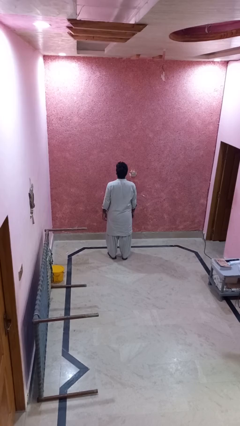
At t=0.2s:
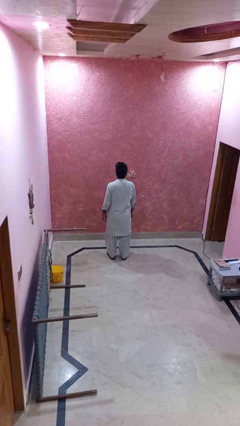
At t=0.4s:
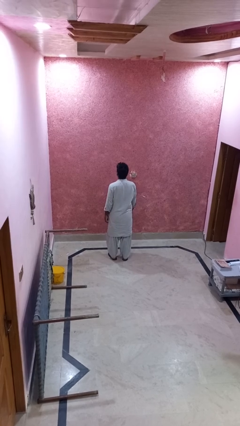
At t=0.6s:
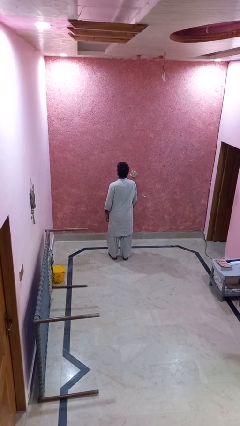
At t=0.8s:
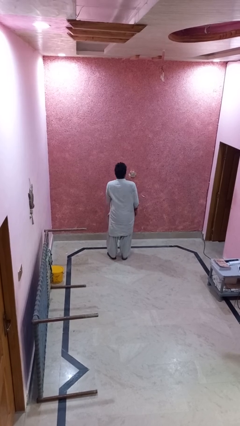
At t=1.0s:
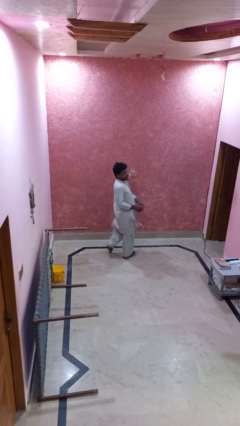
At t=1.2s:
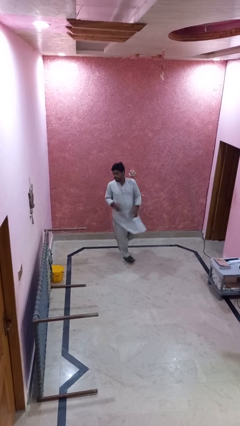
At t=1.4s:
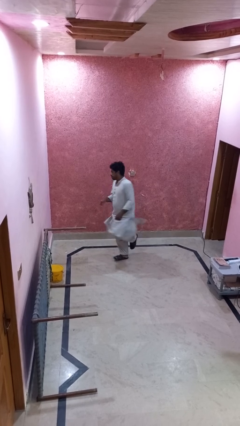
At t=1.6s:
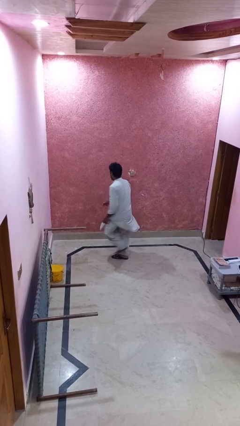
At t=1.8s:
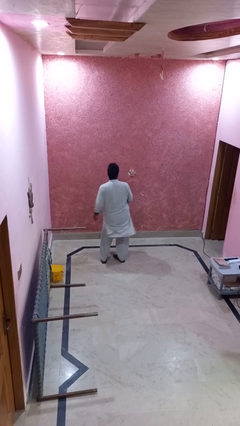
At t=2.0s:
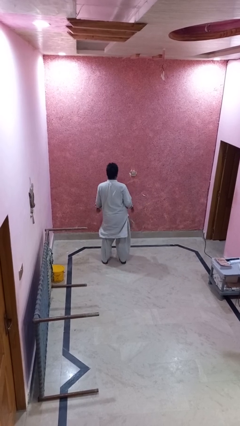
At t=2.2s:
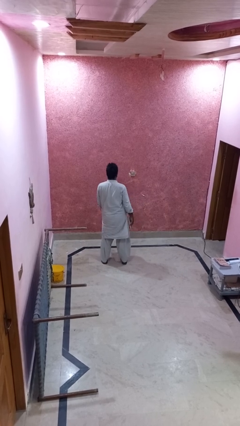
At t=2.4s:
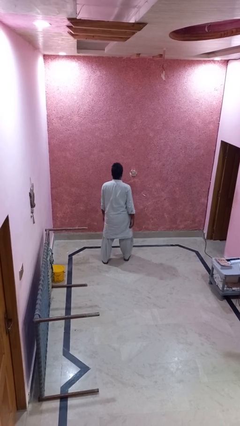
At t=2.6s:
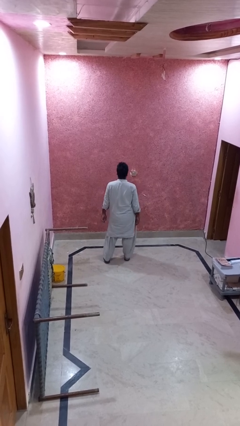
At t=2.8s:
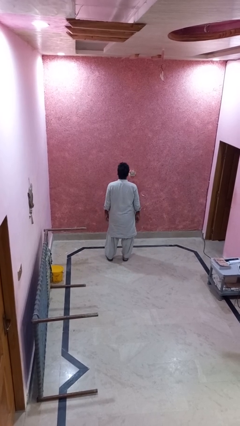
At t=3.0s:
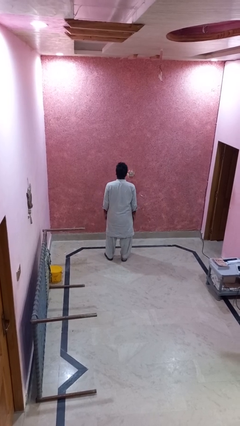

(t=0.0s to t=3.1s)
person twirls

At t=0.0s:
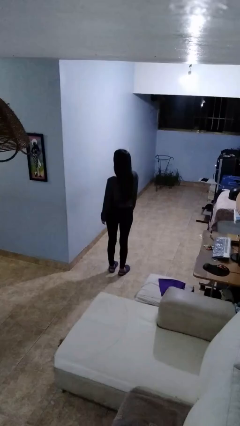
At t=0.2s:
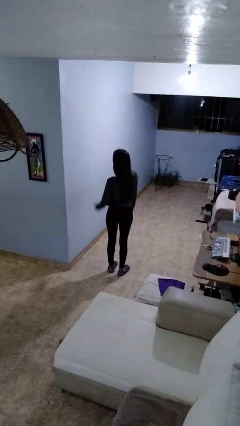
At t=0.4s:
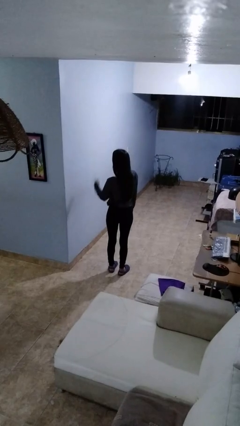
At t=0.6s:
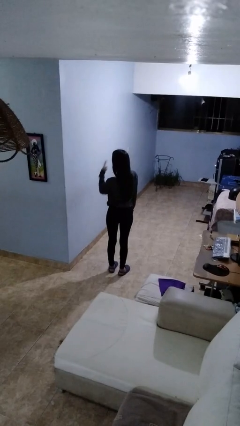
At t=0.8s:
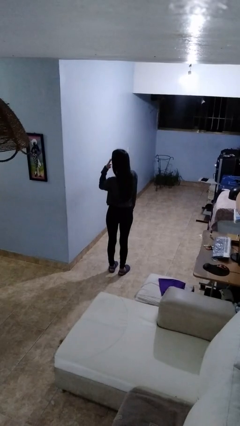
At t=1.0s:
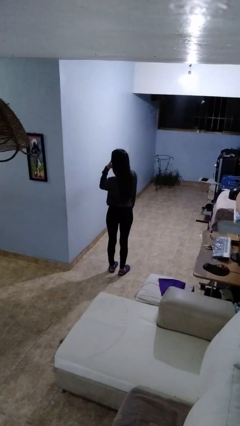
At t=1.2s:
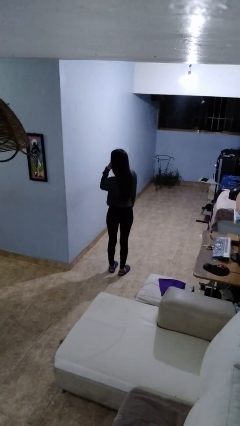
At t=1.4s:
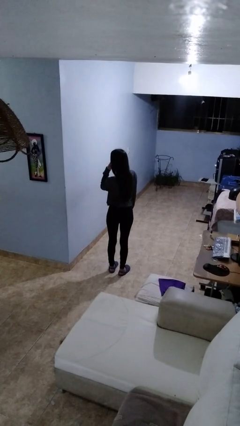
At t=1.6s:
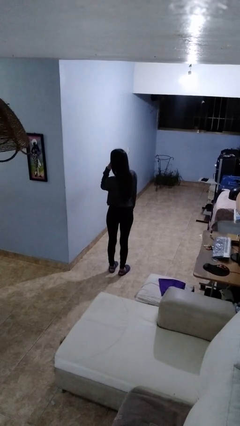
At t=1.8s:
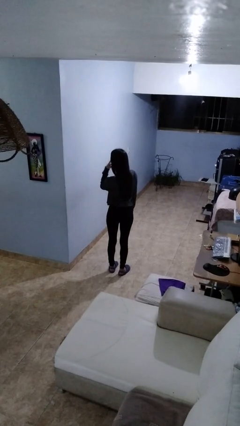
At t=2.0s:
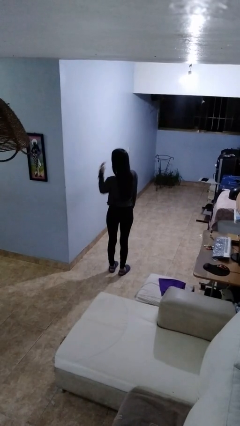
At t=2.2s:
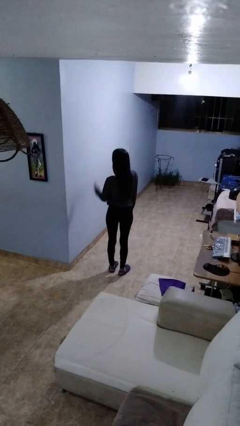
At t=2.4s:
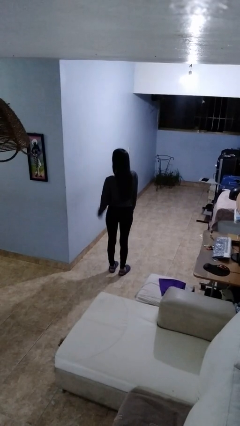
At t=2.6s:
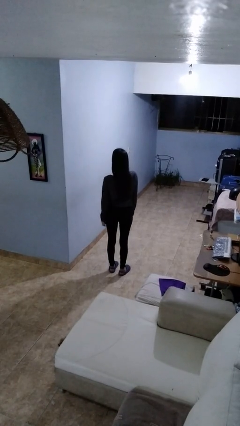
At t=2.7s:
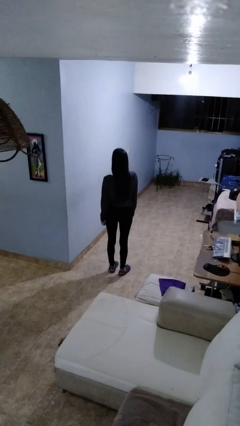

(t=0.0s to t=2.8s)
person gestures watch closely

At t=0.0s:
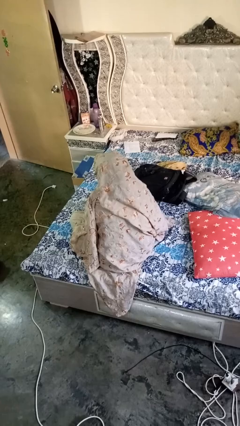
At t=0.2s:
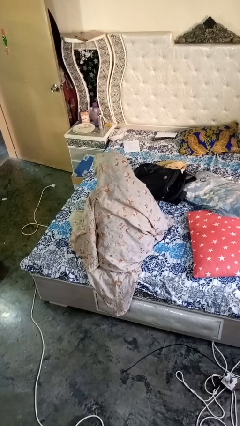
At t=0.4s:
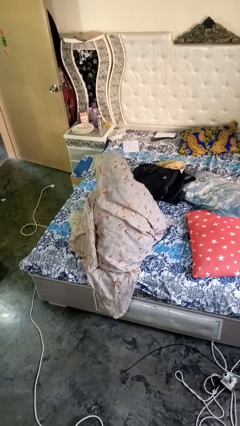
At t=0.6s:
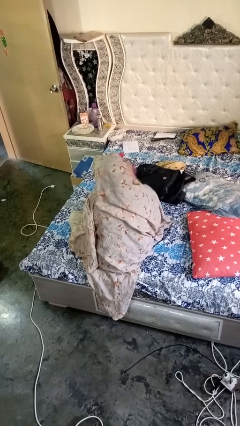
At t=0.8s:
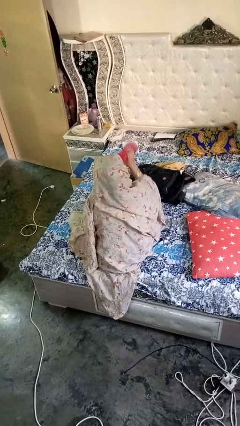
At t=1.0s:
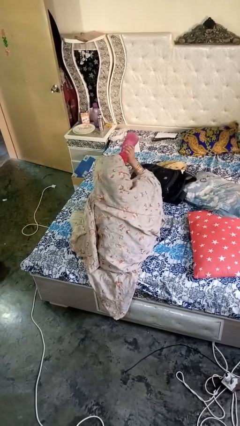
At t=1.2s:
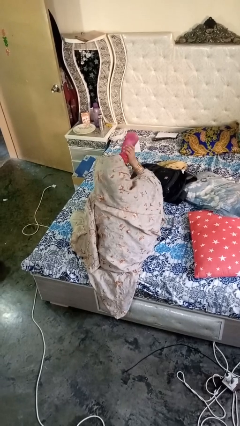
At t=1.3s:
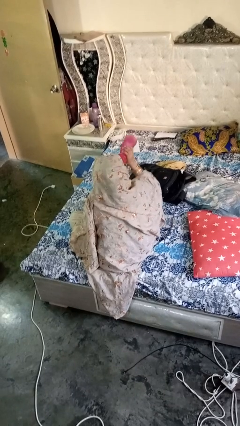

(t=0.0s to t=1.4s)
person drinks from bottle

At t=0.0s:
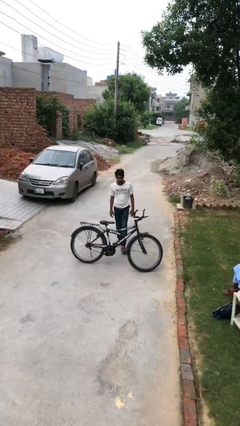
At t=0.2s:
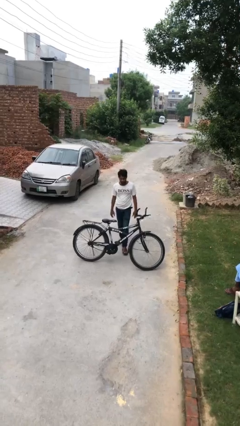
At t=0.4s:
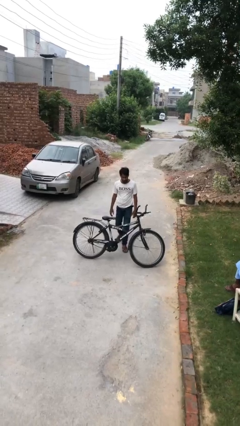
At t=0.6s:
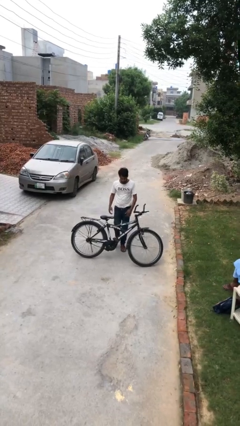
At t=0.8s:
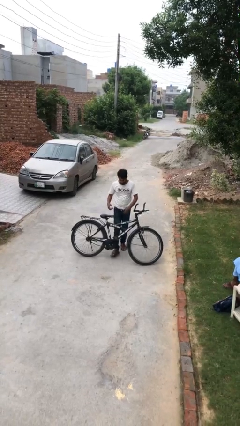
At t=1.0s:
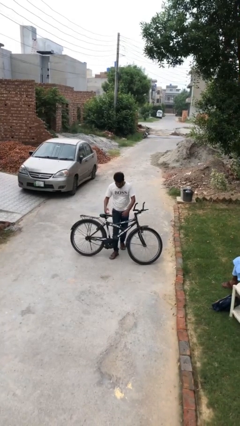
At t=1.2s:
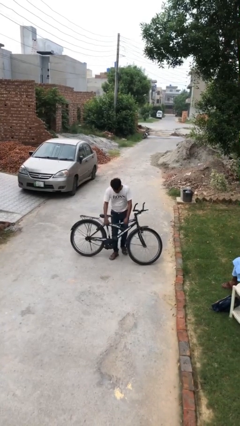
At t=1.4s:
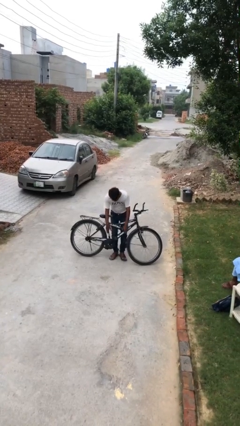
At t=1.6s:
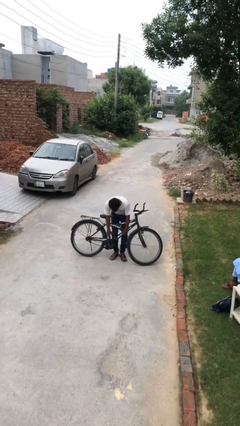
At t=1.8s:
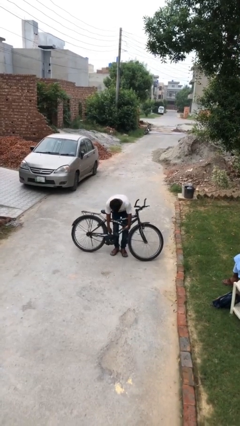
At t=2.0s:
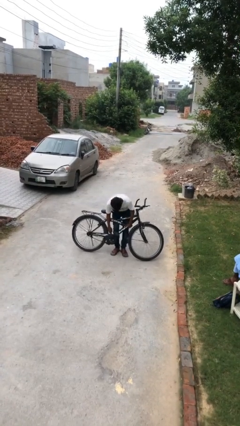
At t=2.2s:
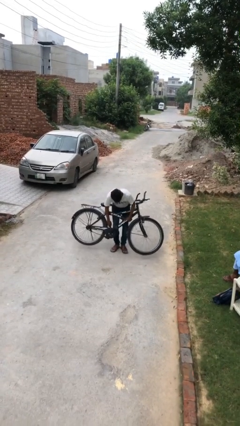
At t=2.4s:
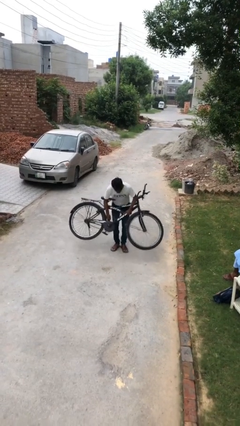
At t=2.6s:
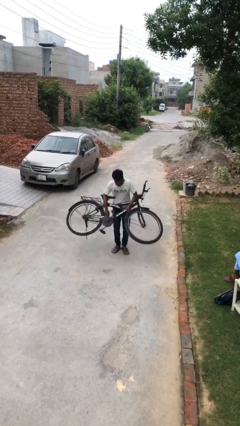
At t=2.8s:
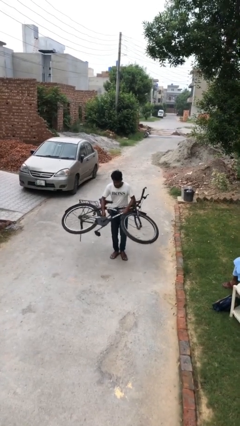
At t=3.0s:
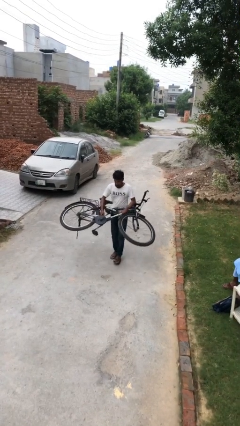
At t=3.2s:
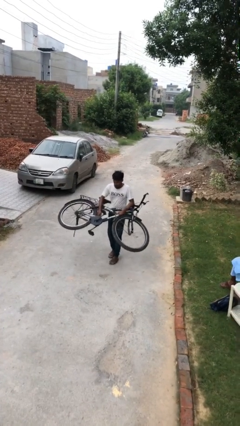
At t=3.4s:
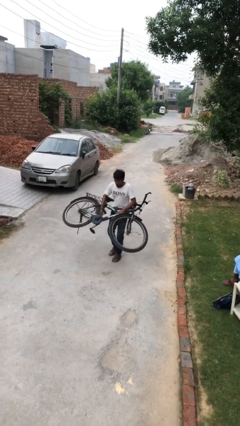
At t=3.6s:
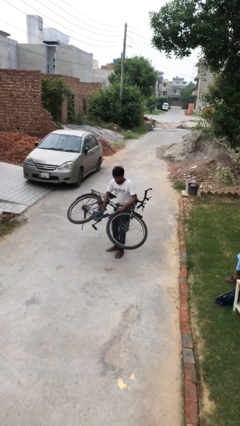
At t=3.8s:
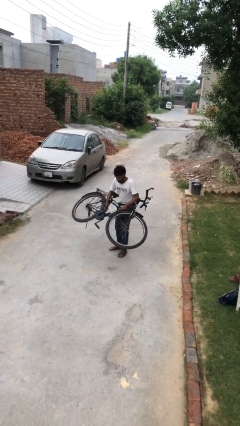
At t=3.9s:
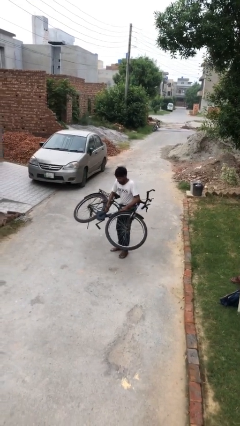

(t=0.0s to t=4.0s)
person picks up object from floor

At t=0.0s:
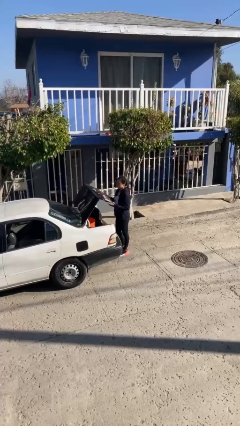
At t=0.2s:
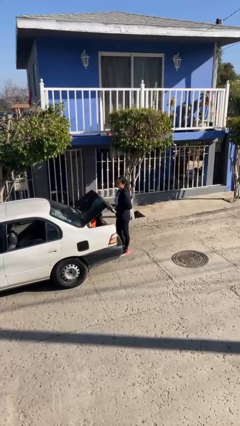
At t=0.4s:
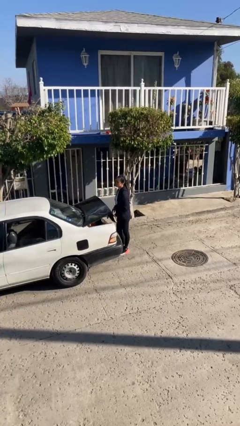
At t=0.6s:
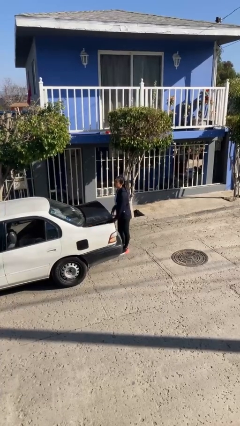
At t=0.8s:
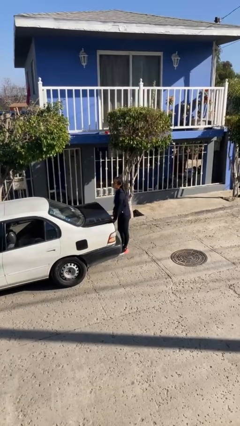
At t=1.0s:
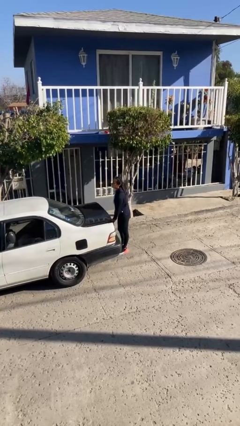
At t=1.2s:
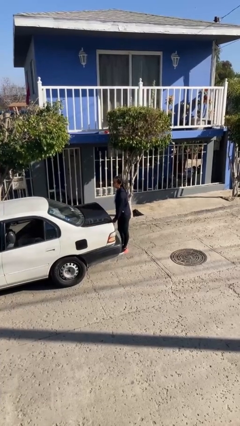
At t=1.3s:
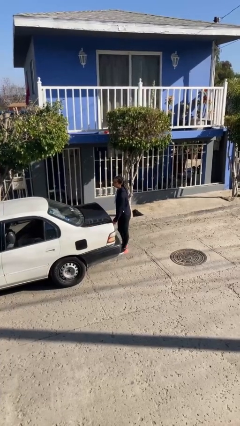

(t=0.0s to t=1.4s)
person closes car trunk

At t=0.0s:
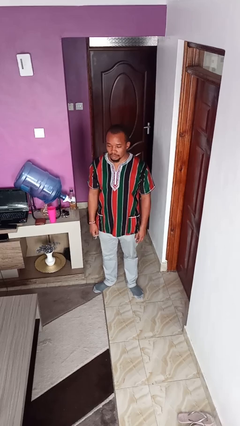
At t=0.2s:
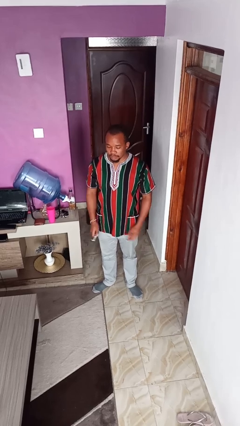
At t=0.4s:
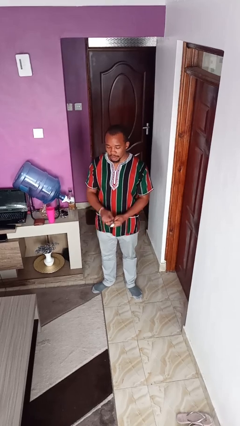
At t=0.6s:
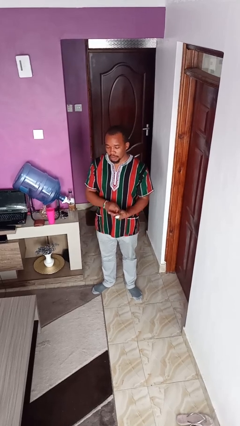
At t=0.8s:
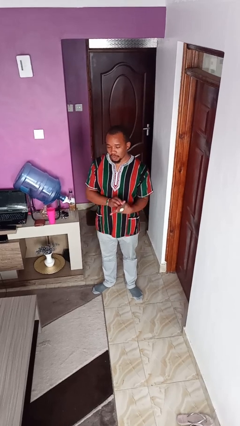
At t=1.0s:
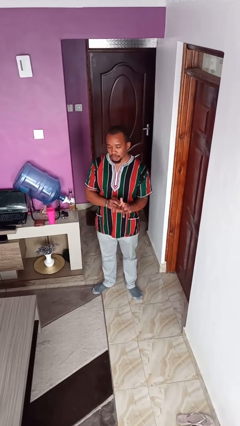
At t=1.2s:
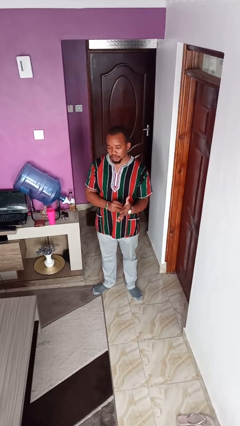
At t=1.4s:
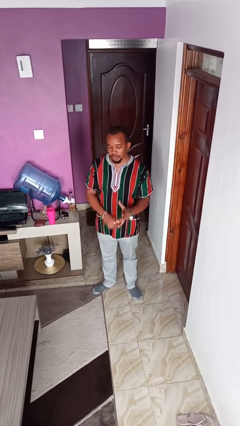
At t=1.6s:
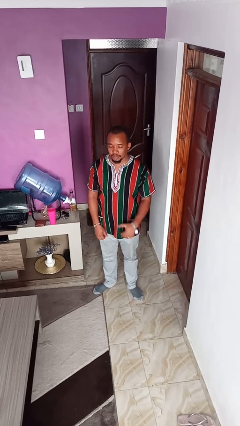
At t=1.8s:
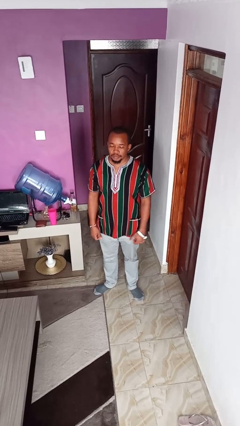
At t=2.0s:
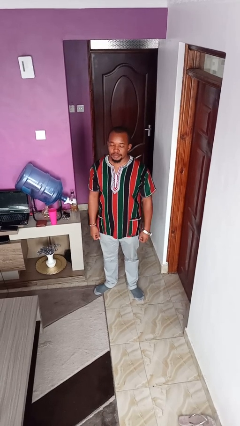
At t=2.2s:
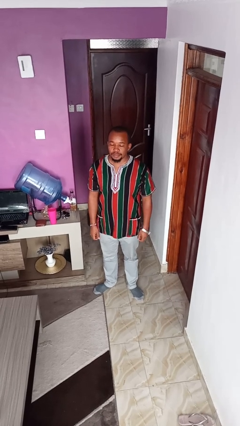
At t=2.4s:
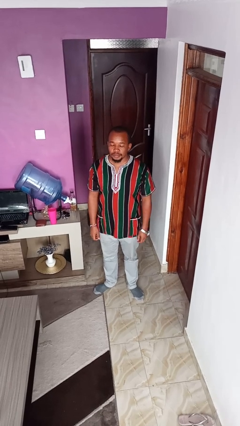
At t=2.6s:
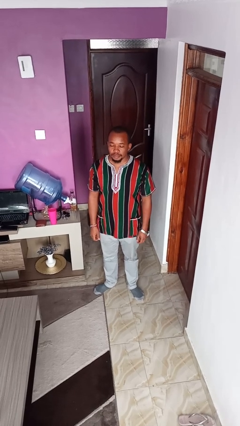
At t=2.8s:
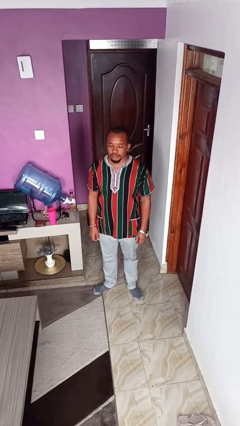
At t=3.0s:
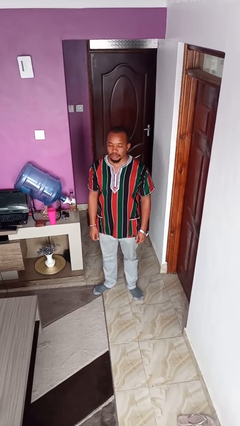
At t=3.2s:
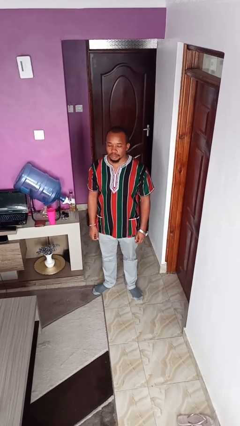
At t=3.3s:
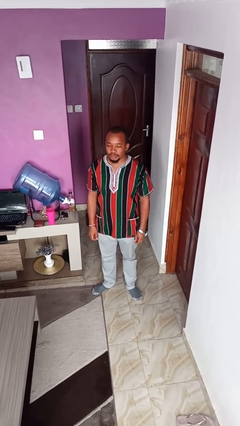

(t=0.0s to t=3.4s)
person puts on wristwatch

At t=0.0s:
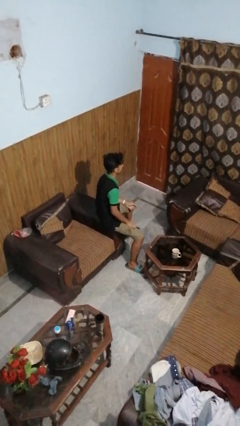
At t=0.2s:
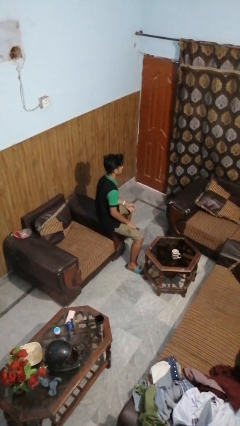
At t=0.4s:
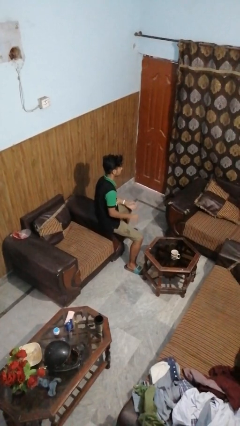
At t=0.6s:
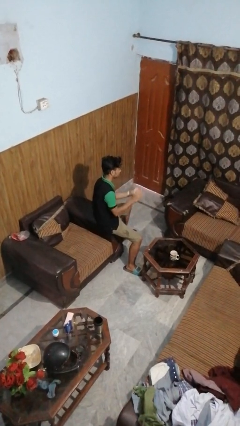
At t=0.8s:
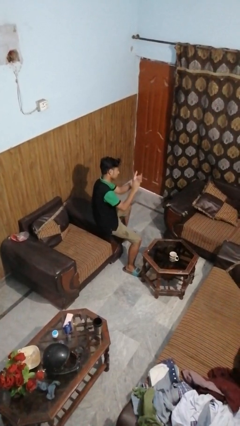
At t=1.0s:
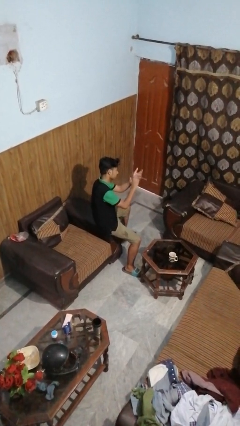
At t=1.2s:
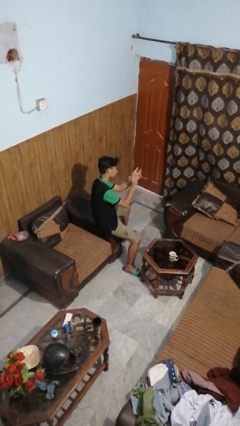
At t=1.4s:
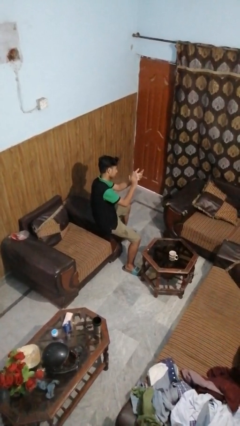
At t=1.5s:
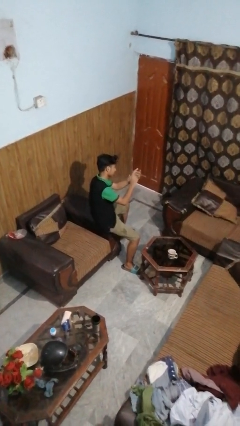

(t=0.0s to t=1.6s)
person claps hands
